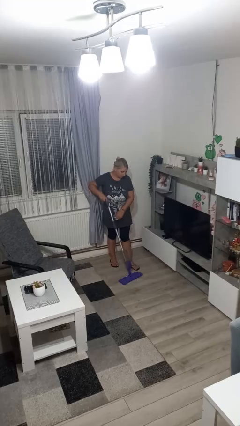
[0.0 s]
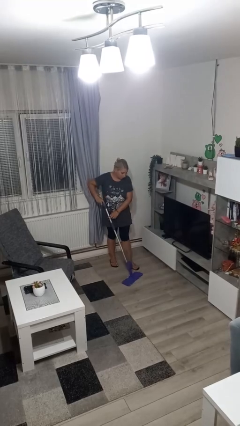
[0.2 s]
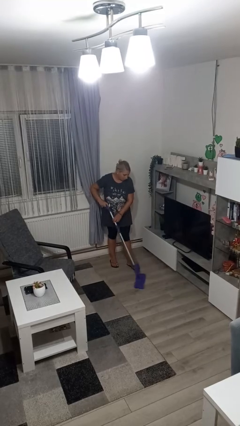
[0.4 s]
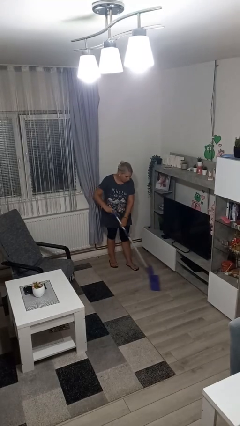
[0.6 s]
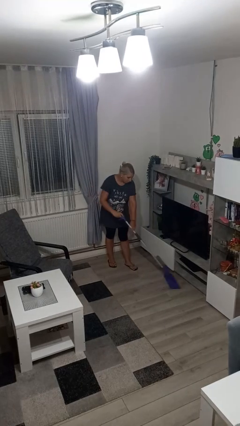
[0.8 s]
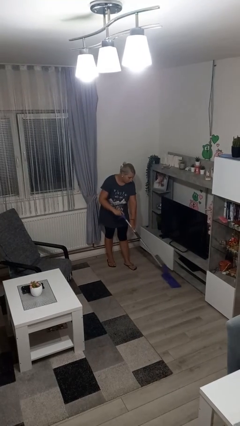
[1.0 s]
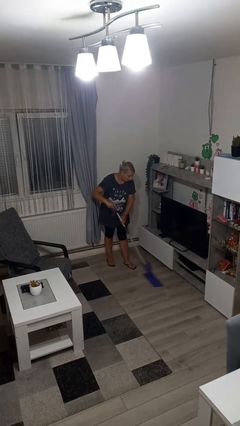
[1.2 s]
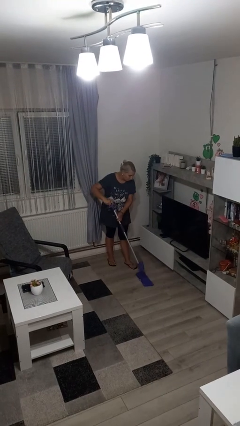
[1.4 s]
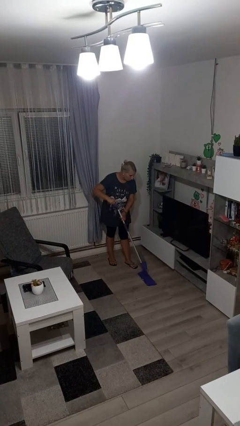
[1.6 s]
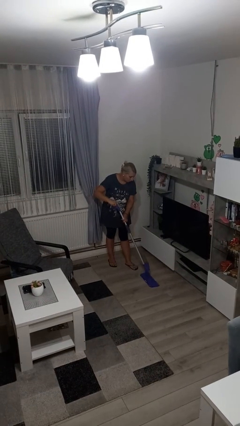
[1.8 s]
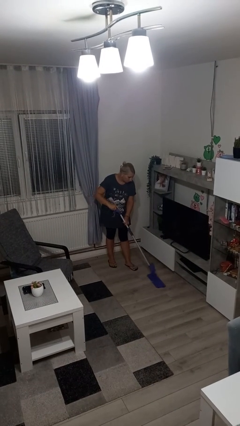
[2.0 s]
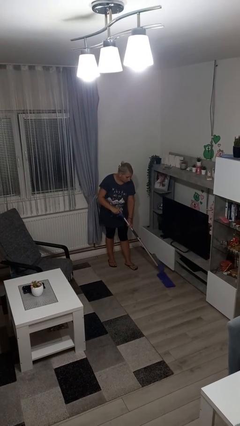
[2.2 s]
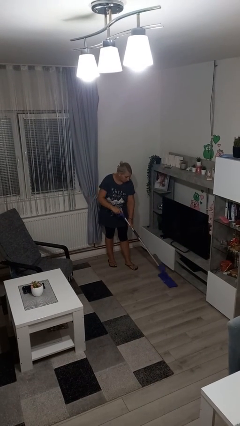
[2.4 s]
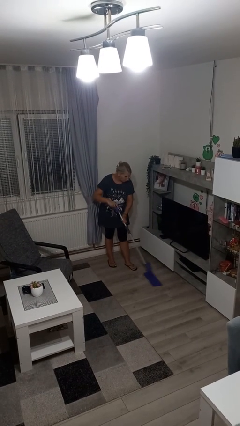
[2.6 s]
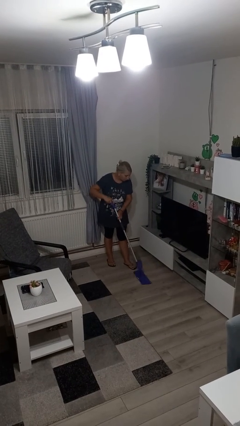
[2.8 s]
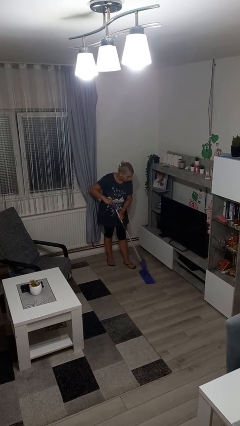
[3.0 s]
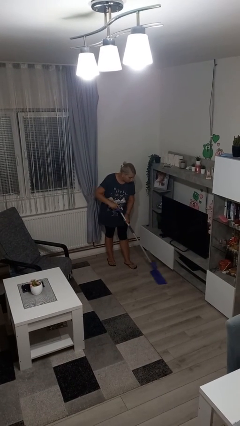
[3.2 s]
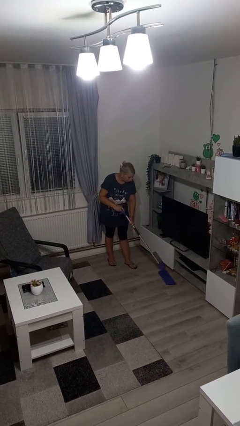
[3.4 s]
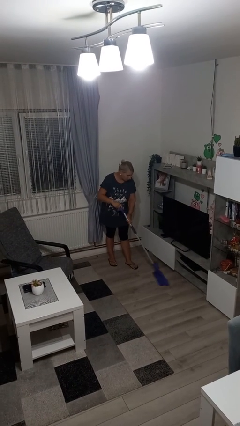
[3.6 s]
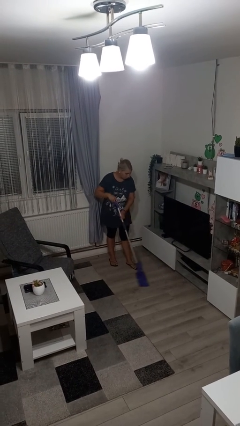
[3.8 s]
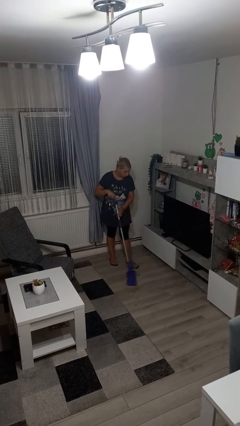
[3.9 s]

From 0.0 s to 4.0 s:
person mops

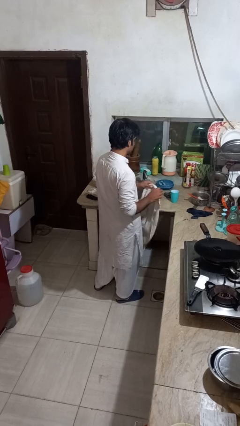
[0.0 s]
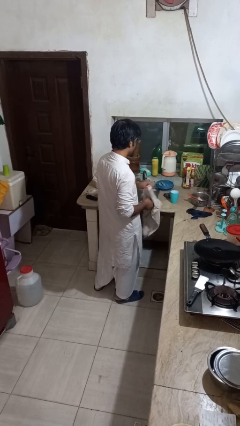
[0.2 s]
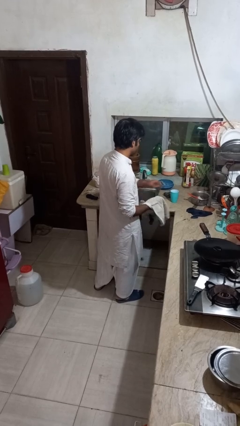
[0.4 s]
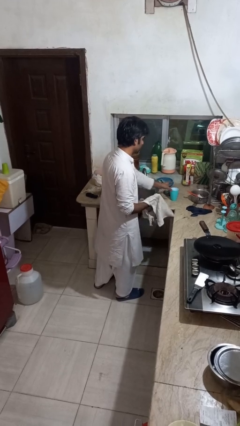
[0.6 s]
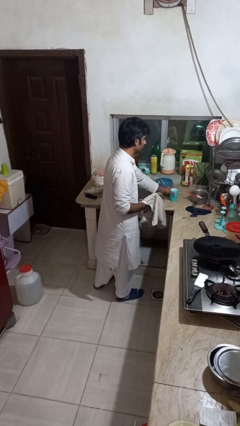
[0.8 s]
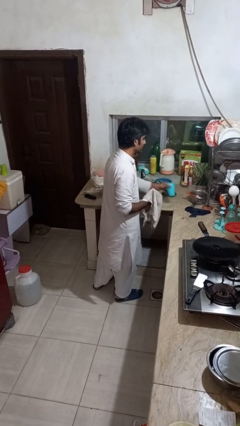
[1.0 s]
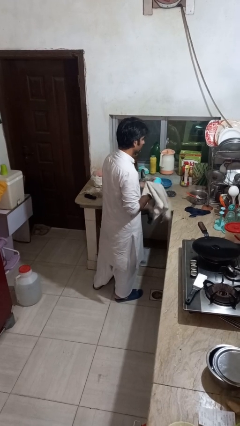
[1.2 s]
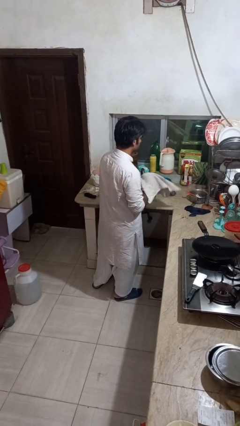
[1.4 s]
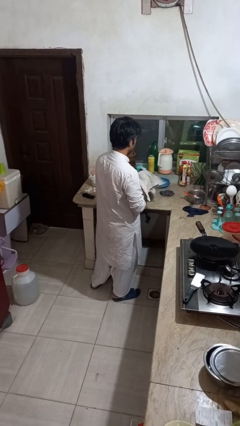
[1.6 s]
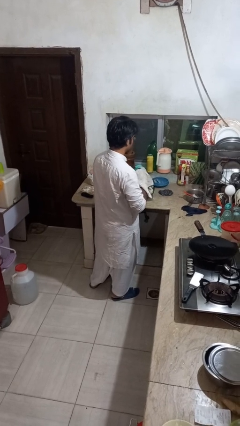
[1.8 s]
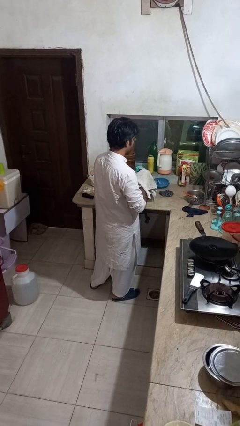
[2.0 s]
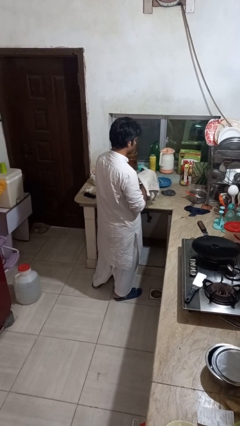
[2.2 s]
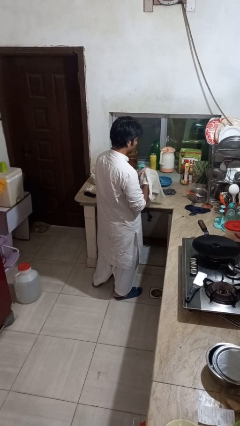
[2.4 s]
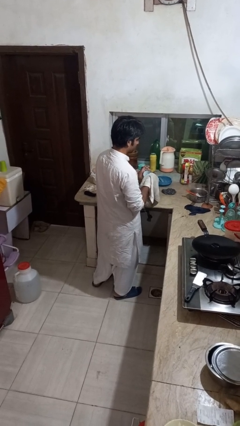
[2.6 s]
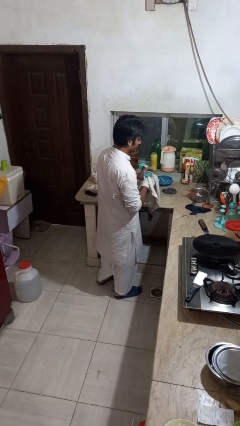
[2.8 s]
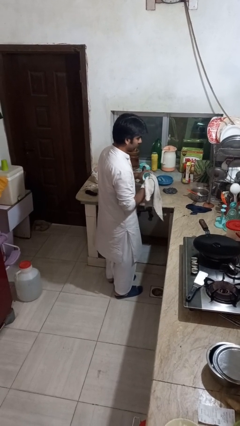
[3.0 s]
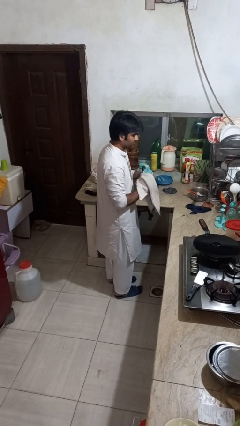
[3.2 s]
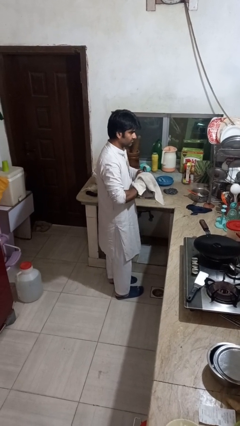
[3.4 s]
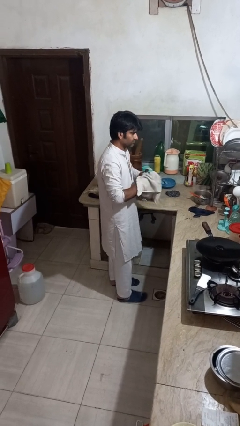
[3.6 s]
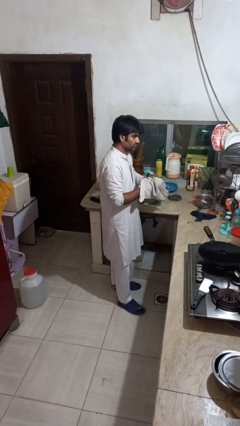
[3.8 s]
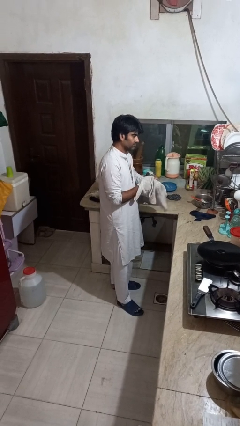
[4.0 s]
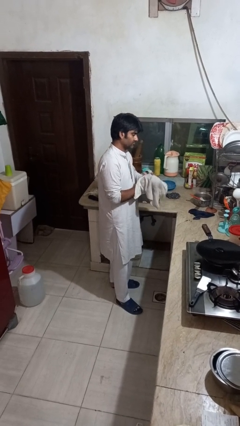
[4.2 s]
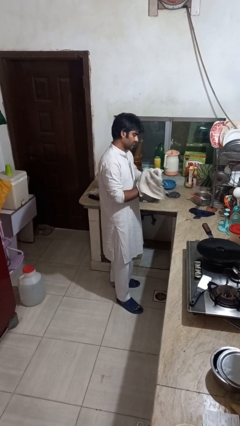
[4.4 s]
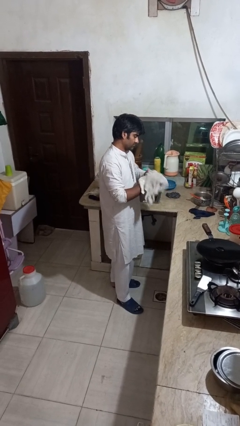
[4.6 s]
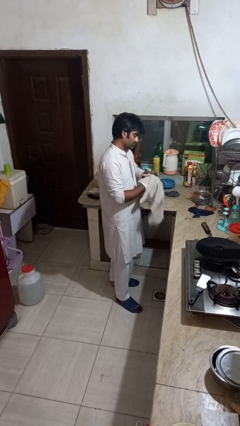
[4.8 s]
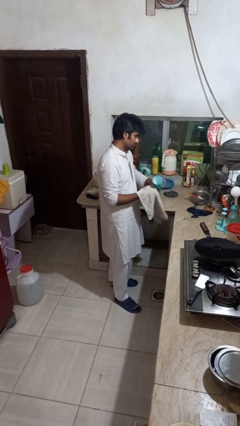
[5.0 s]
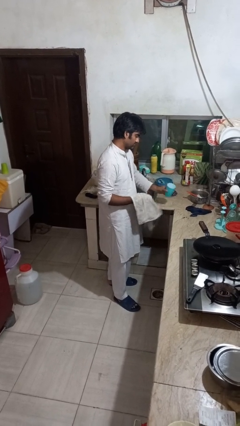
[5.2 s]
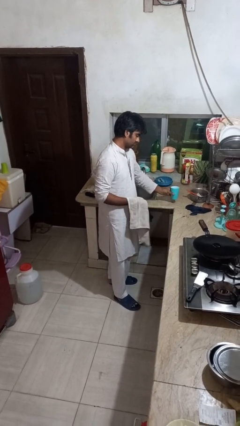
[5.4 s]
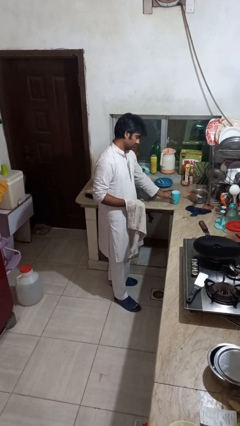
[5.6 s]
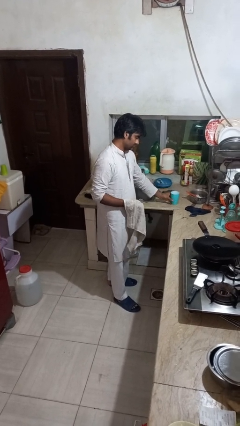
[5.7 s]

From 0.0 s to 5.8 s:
person dries dish

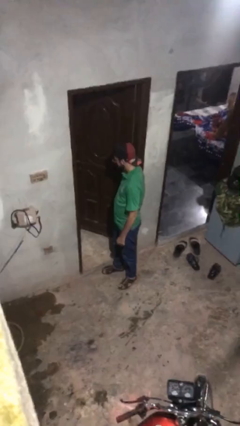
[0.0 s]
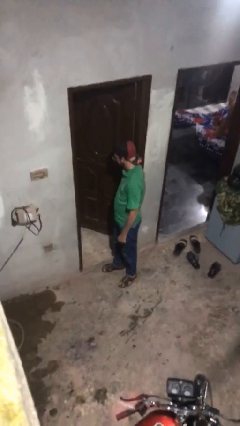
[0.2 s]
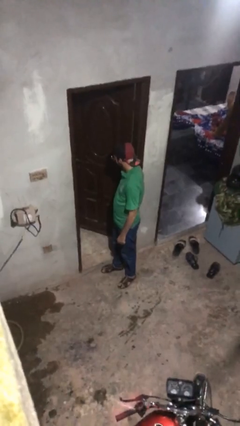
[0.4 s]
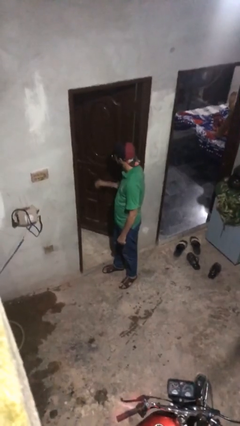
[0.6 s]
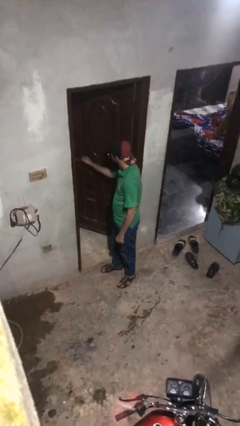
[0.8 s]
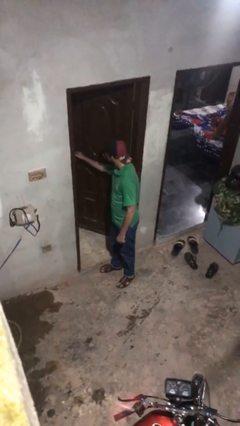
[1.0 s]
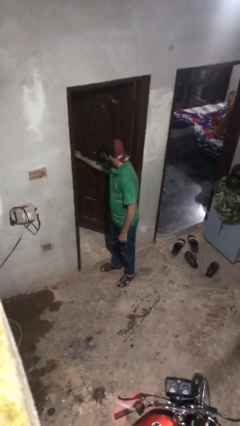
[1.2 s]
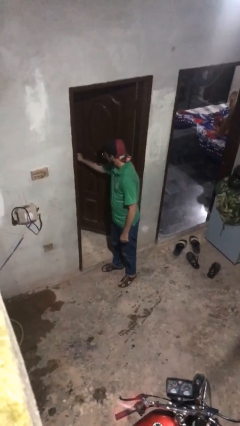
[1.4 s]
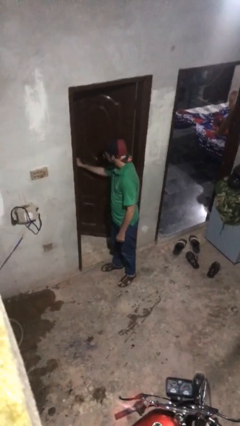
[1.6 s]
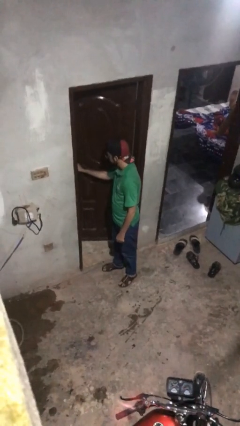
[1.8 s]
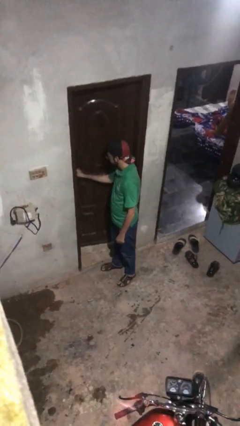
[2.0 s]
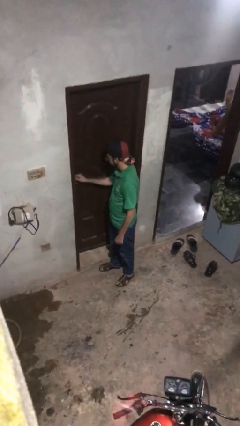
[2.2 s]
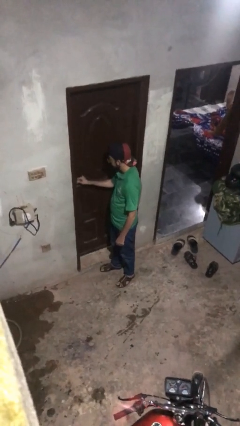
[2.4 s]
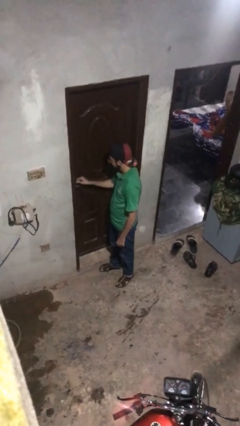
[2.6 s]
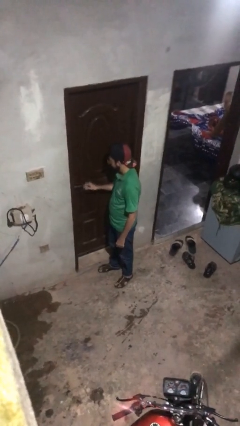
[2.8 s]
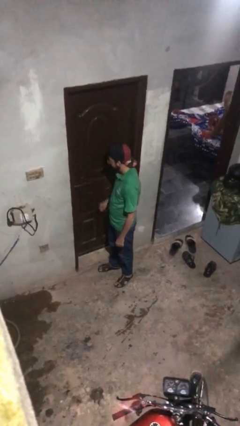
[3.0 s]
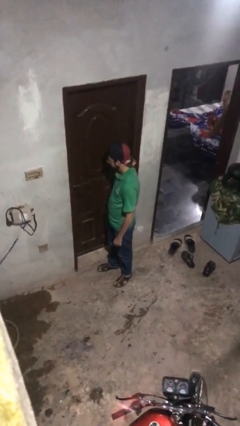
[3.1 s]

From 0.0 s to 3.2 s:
person closes facility door

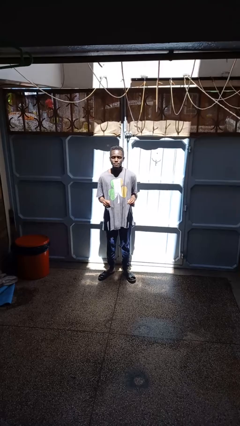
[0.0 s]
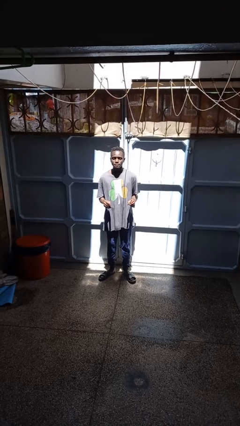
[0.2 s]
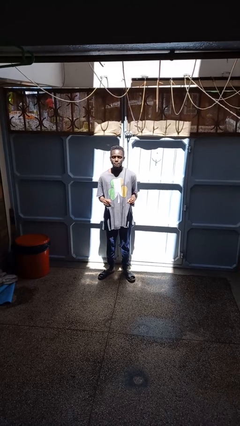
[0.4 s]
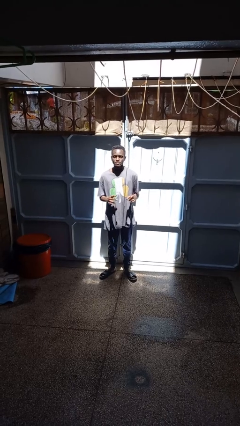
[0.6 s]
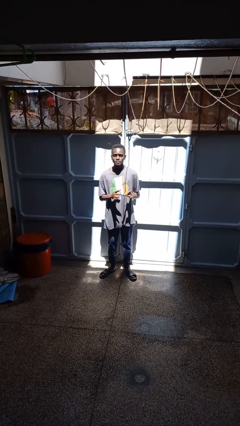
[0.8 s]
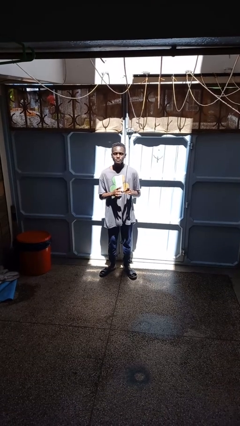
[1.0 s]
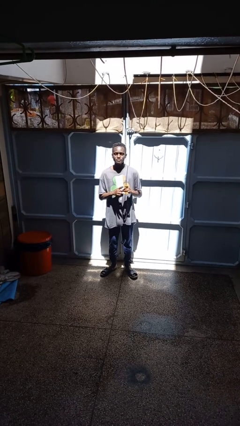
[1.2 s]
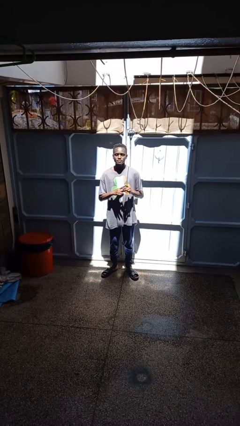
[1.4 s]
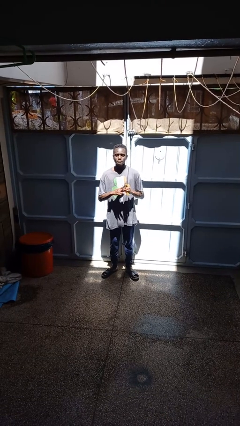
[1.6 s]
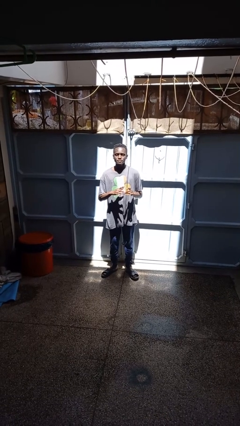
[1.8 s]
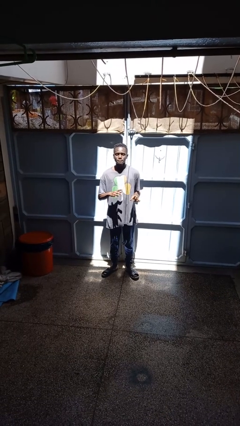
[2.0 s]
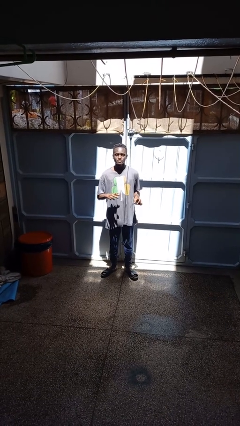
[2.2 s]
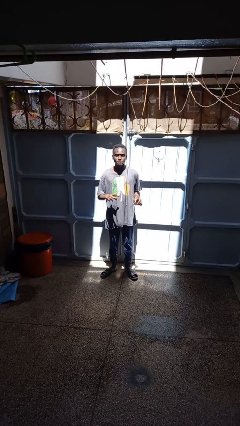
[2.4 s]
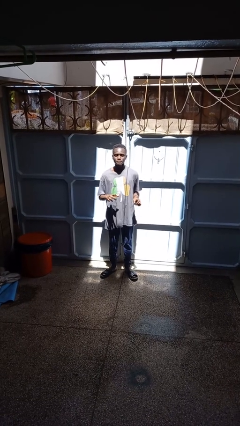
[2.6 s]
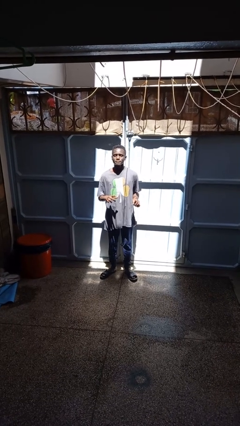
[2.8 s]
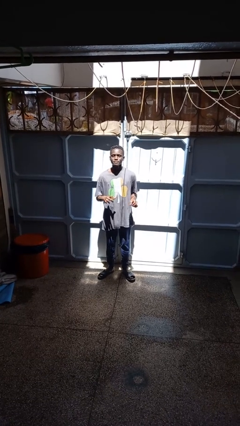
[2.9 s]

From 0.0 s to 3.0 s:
person puts on ring

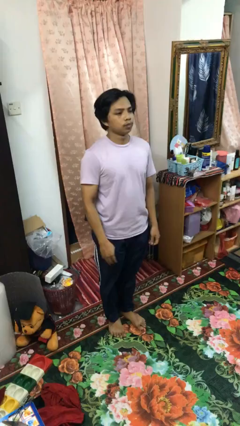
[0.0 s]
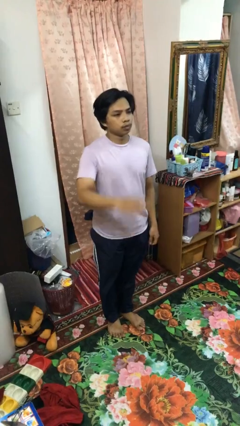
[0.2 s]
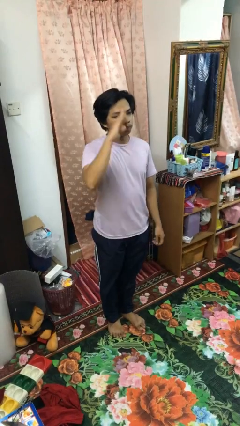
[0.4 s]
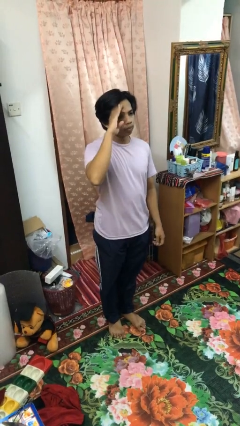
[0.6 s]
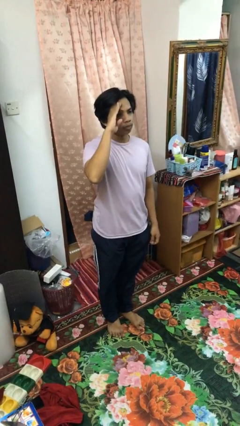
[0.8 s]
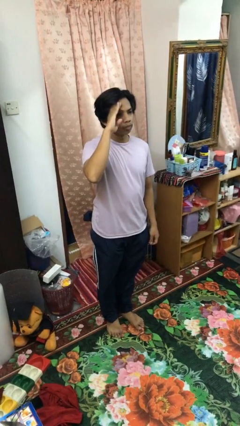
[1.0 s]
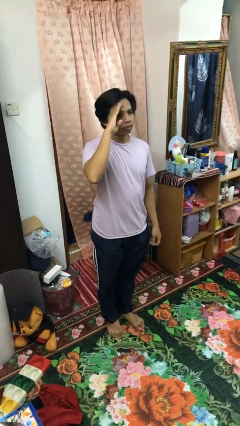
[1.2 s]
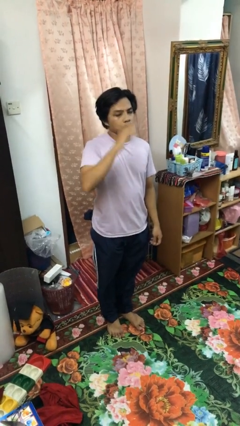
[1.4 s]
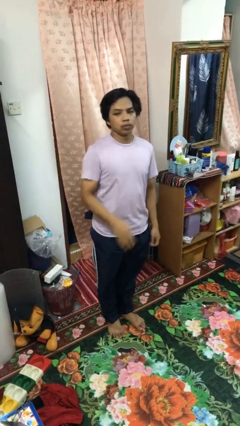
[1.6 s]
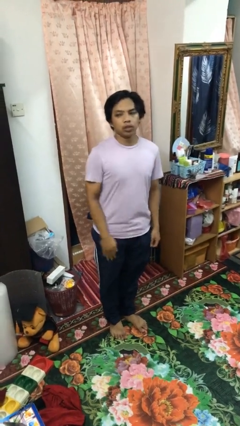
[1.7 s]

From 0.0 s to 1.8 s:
person salutes

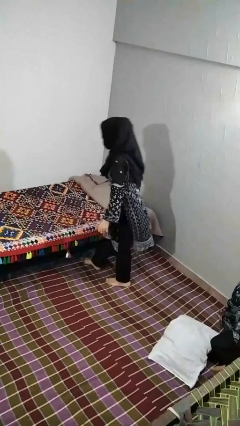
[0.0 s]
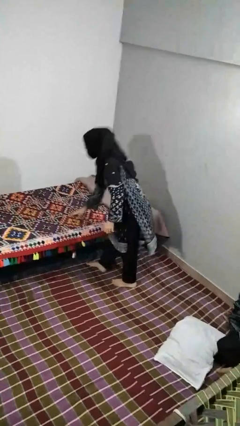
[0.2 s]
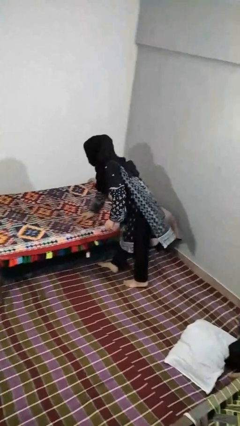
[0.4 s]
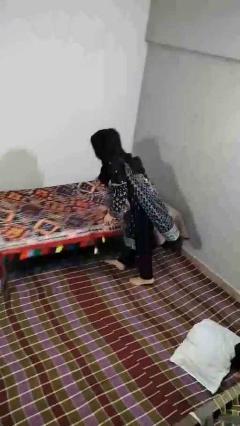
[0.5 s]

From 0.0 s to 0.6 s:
person makes bed
